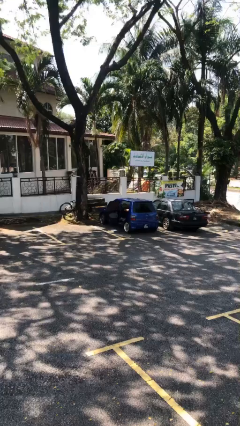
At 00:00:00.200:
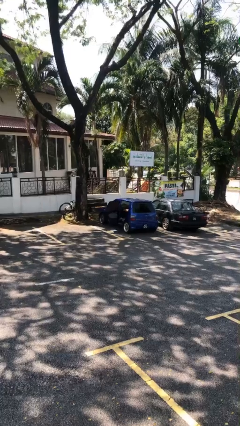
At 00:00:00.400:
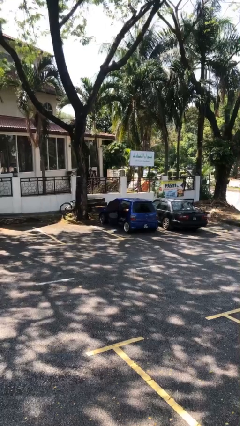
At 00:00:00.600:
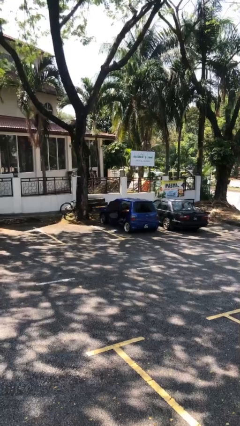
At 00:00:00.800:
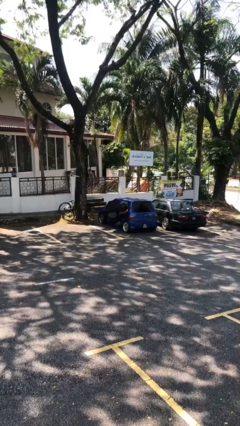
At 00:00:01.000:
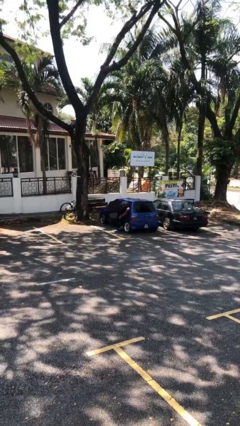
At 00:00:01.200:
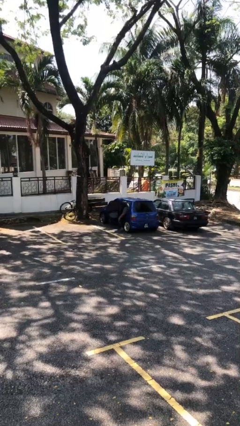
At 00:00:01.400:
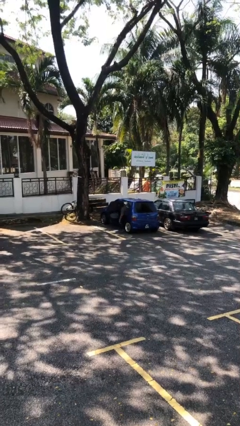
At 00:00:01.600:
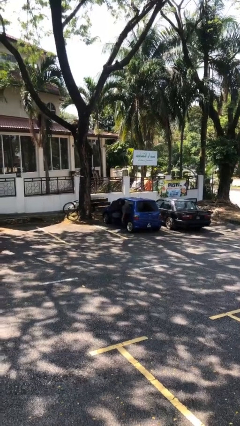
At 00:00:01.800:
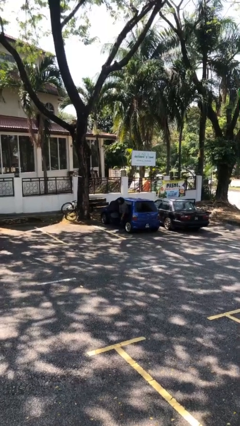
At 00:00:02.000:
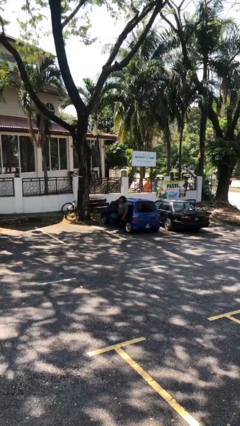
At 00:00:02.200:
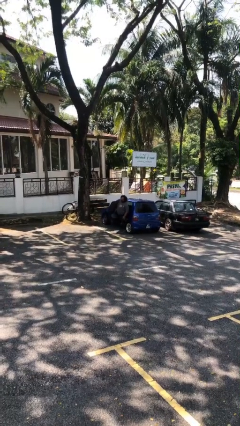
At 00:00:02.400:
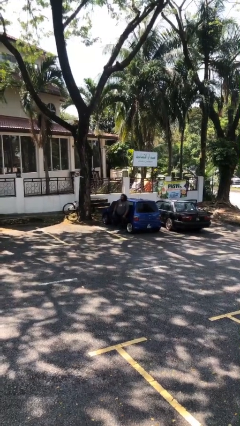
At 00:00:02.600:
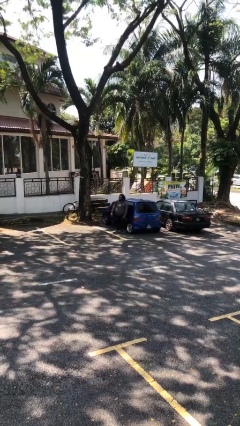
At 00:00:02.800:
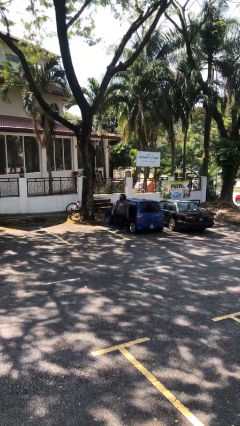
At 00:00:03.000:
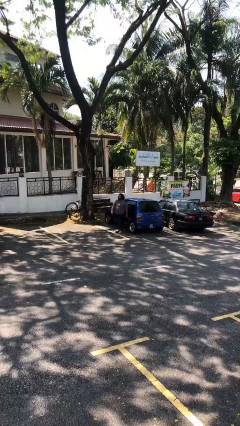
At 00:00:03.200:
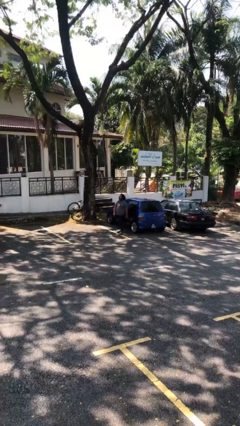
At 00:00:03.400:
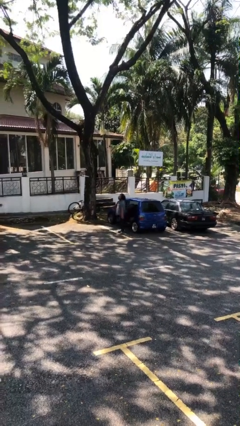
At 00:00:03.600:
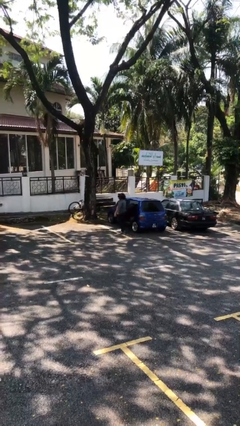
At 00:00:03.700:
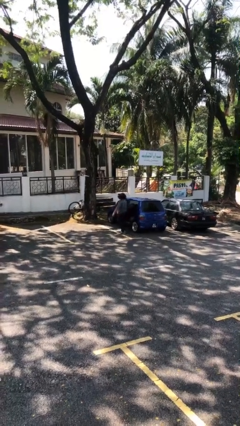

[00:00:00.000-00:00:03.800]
person exits car

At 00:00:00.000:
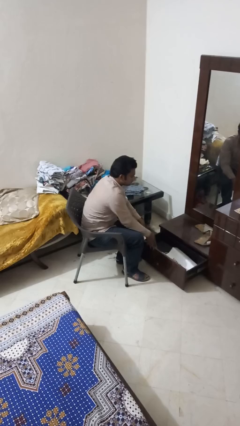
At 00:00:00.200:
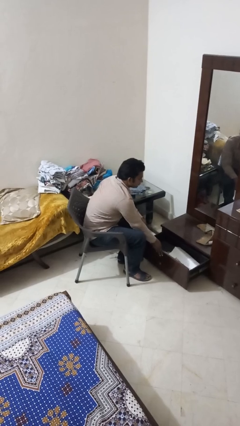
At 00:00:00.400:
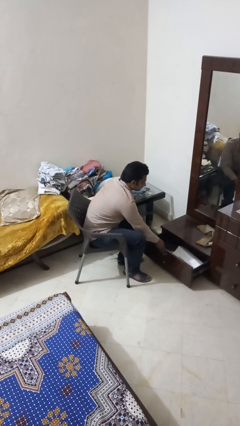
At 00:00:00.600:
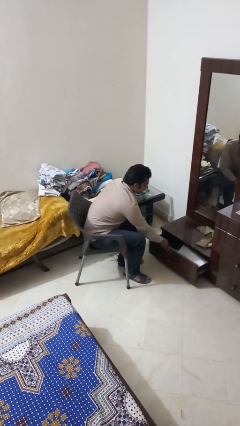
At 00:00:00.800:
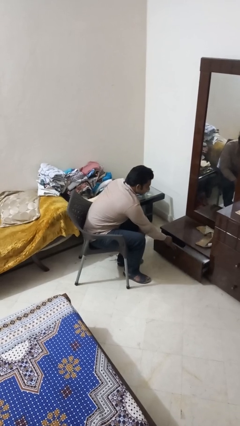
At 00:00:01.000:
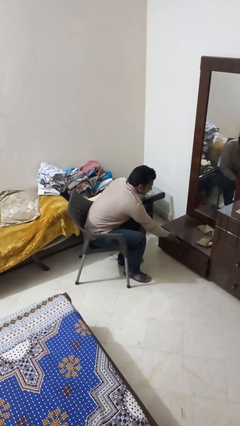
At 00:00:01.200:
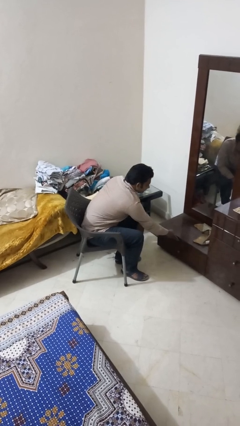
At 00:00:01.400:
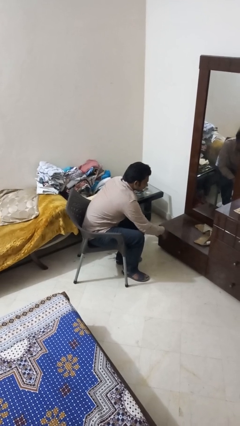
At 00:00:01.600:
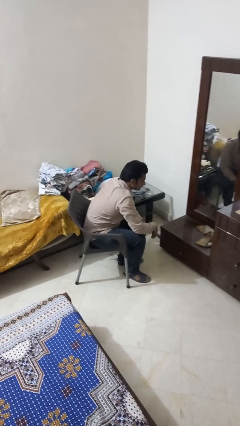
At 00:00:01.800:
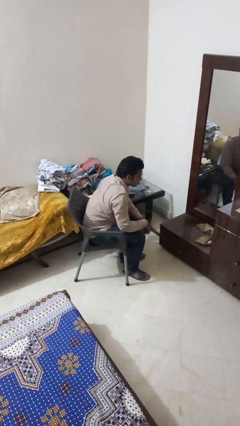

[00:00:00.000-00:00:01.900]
person closes dresser drawer

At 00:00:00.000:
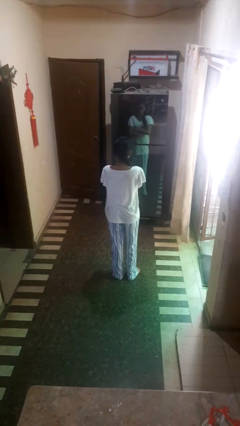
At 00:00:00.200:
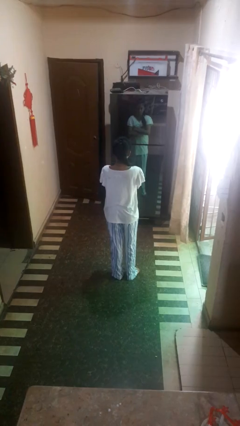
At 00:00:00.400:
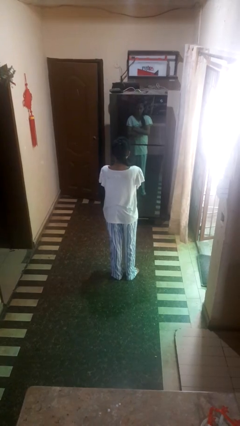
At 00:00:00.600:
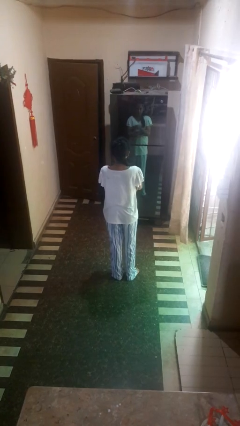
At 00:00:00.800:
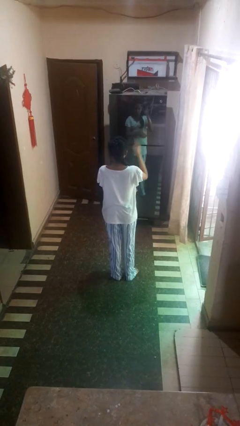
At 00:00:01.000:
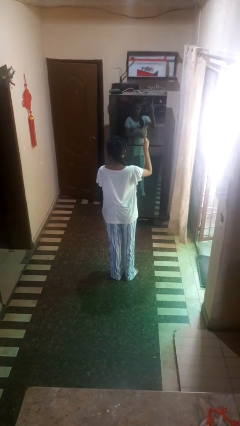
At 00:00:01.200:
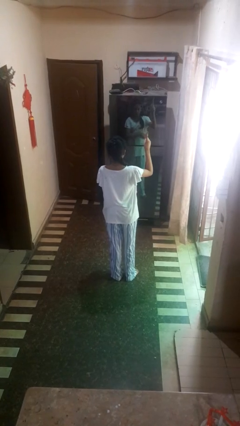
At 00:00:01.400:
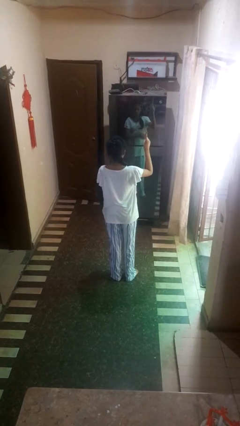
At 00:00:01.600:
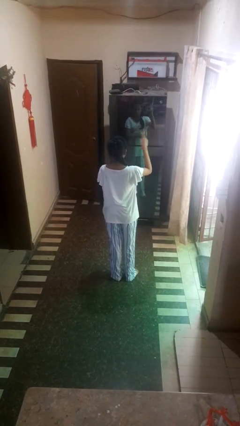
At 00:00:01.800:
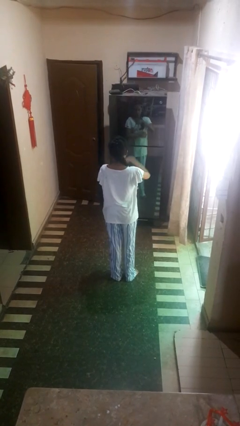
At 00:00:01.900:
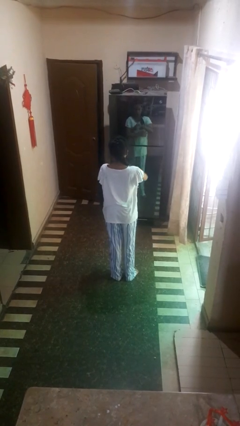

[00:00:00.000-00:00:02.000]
person gestures number one

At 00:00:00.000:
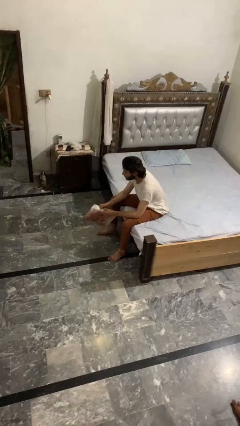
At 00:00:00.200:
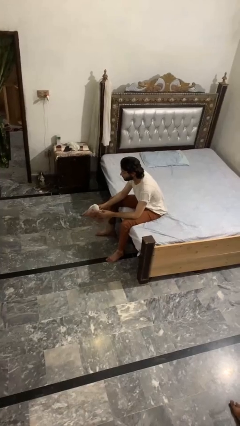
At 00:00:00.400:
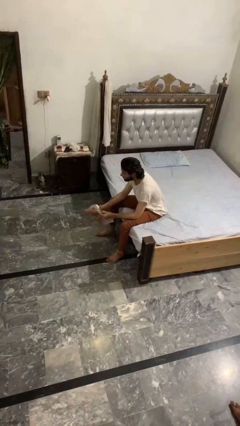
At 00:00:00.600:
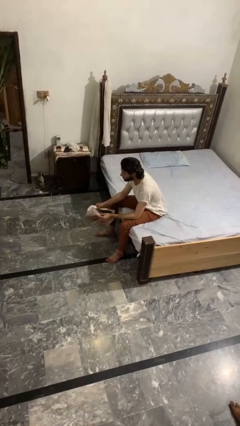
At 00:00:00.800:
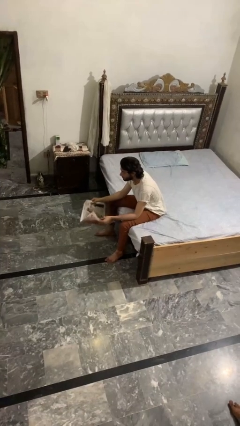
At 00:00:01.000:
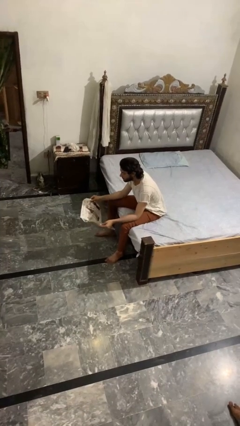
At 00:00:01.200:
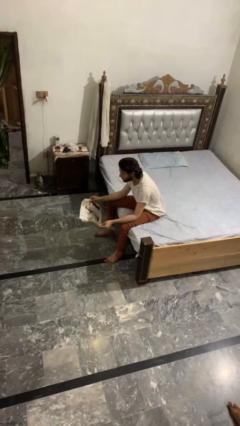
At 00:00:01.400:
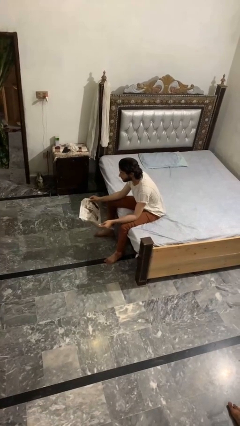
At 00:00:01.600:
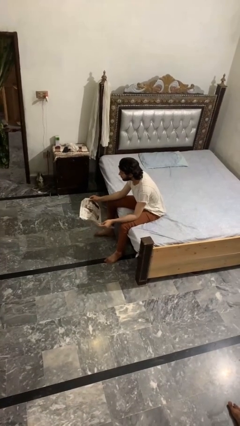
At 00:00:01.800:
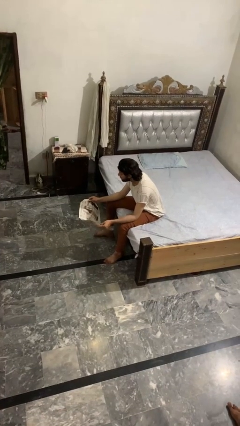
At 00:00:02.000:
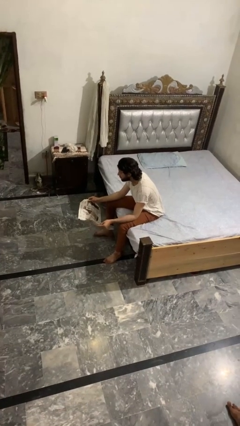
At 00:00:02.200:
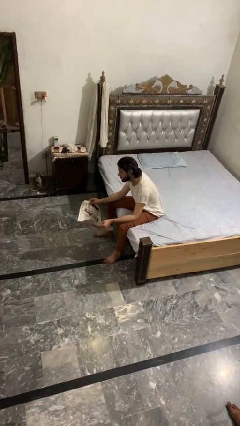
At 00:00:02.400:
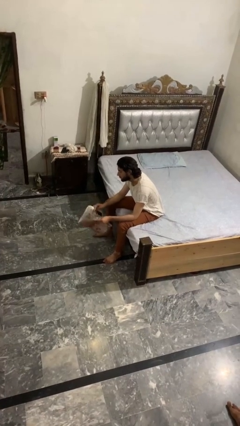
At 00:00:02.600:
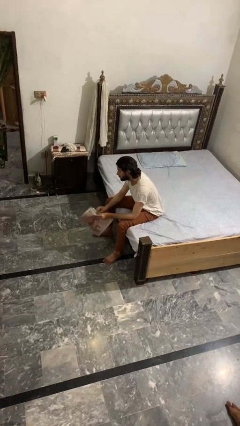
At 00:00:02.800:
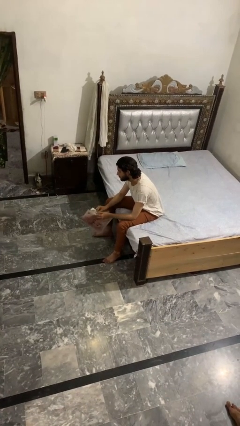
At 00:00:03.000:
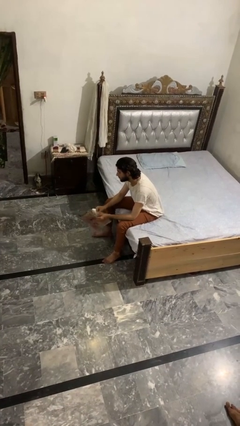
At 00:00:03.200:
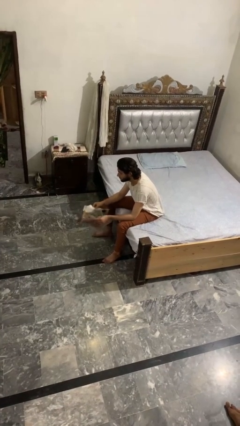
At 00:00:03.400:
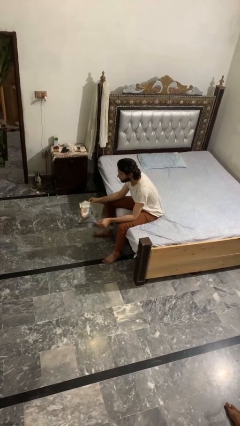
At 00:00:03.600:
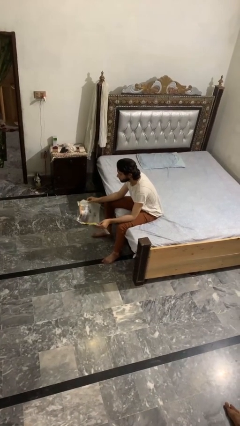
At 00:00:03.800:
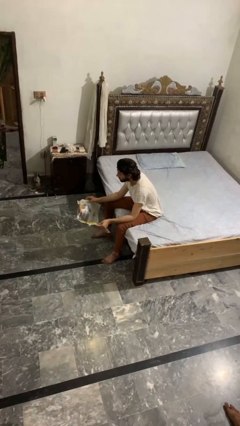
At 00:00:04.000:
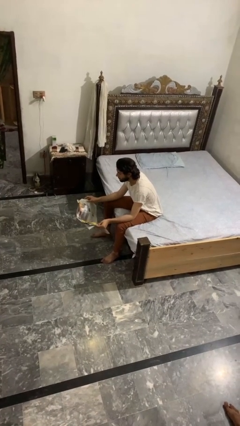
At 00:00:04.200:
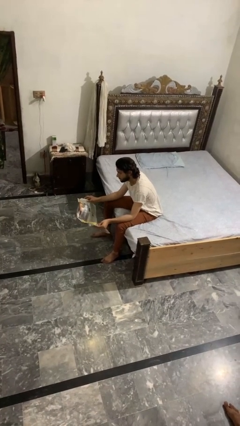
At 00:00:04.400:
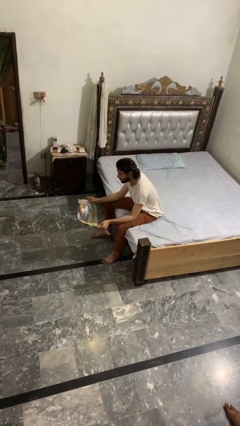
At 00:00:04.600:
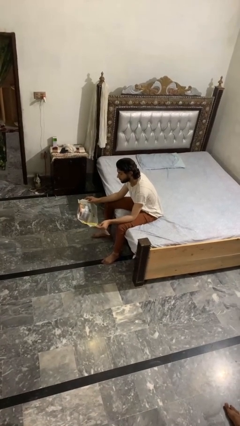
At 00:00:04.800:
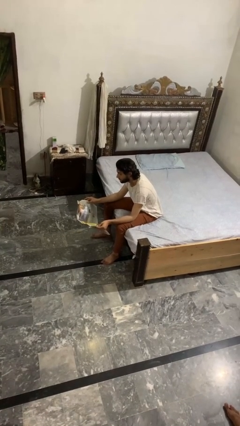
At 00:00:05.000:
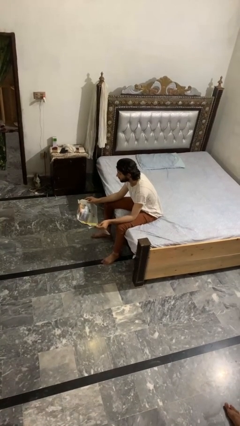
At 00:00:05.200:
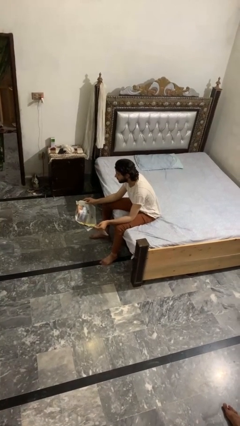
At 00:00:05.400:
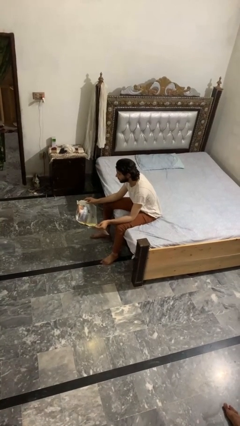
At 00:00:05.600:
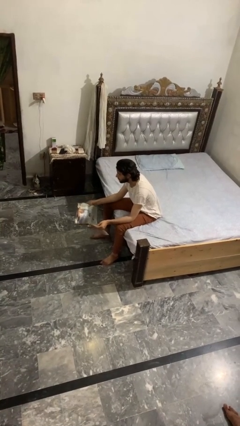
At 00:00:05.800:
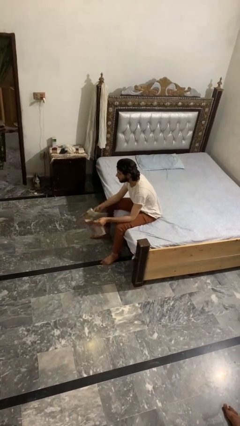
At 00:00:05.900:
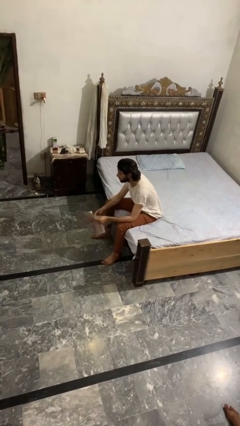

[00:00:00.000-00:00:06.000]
person reads magazine

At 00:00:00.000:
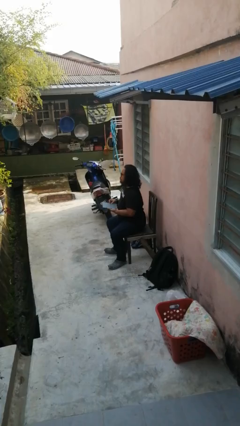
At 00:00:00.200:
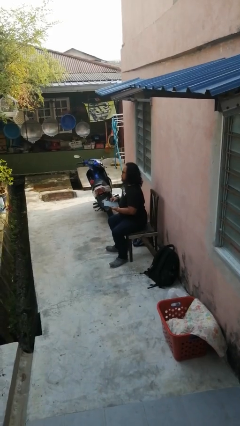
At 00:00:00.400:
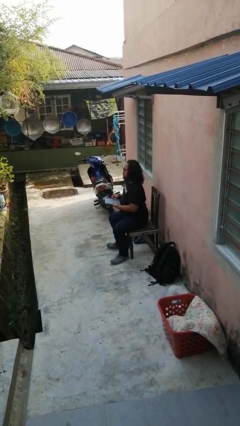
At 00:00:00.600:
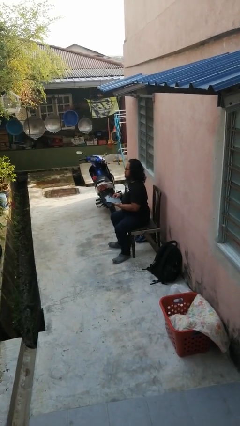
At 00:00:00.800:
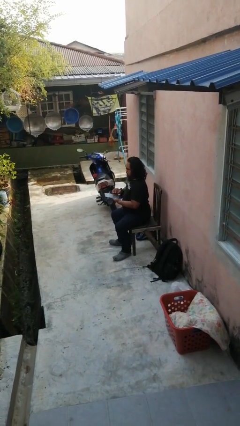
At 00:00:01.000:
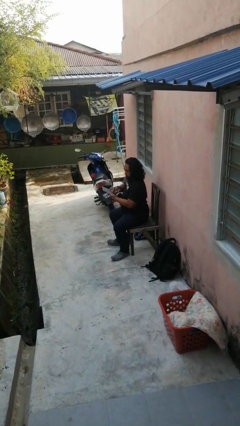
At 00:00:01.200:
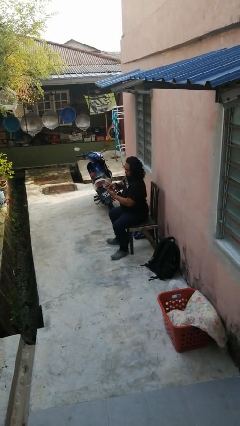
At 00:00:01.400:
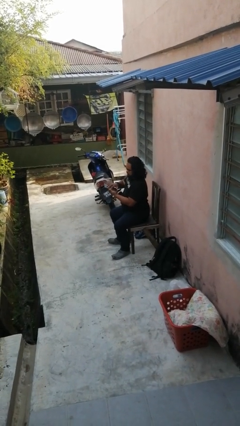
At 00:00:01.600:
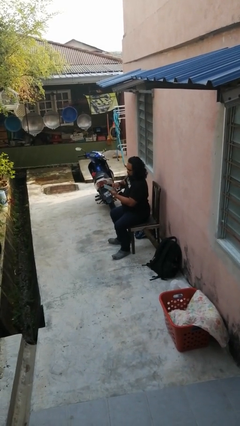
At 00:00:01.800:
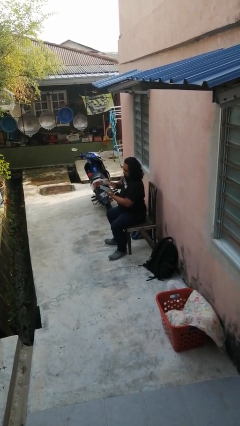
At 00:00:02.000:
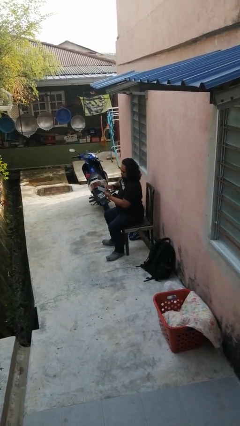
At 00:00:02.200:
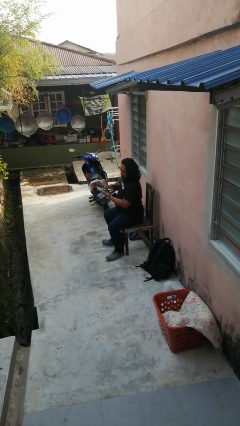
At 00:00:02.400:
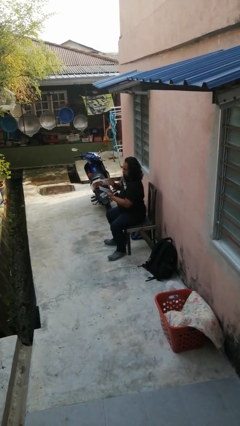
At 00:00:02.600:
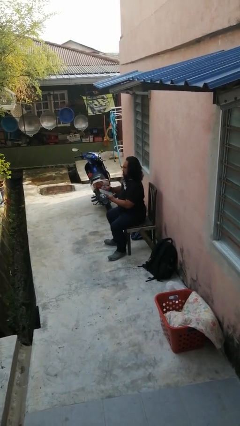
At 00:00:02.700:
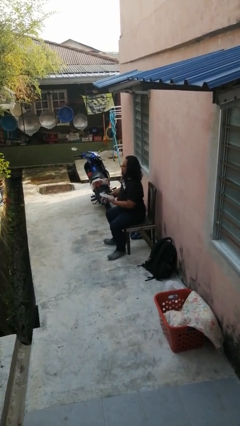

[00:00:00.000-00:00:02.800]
person interacts with tablet

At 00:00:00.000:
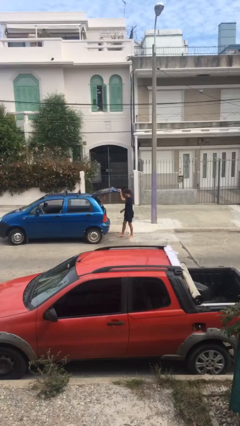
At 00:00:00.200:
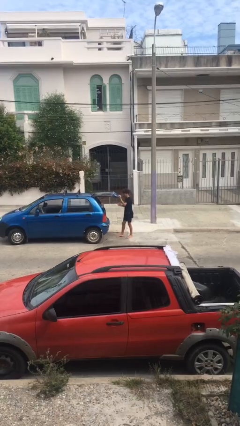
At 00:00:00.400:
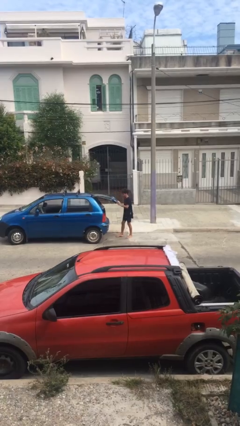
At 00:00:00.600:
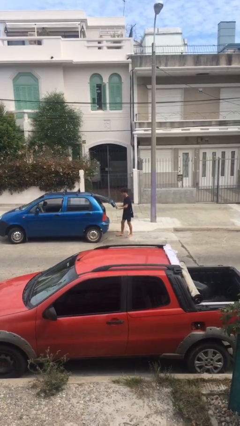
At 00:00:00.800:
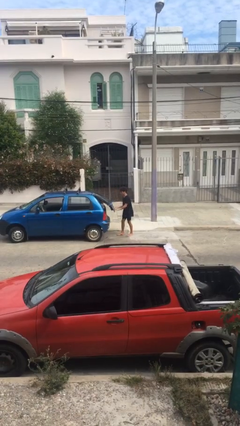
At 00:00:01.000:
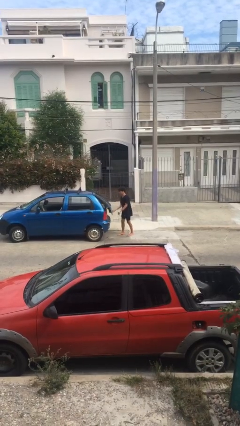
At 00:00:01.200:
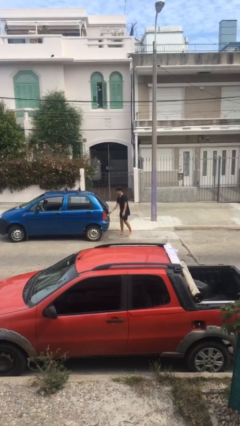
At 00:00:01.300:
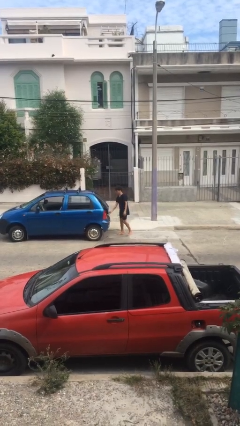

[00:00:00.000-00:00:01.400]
person closes car trunk
